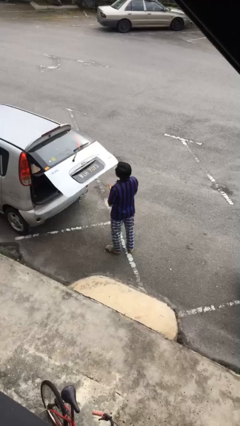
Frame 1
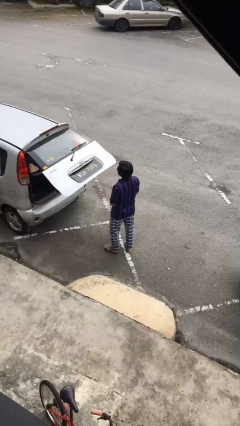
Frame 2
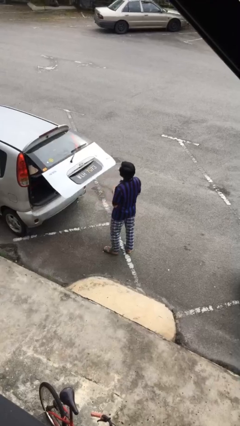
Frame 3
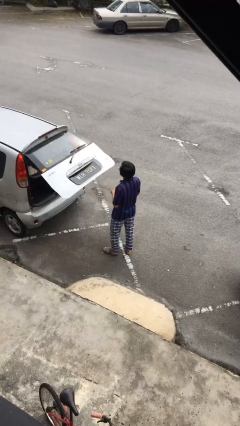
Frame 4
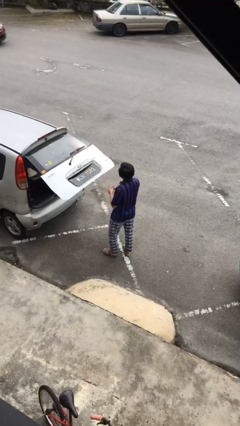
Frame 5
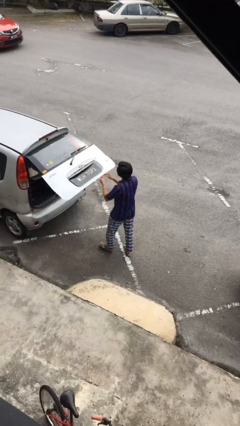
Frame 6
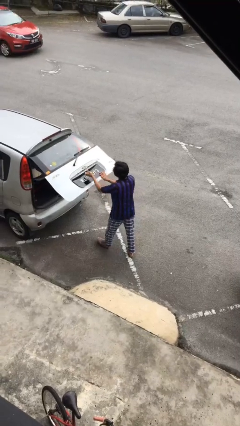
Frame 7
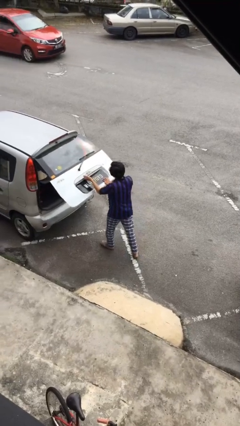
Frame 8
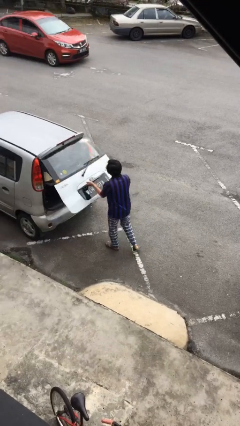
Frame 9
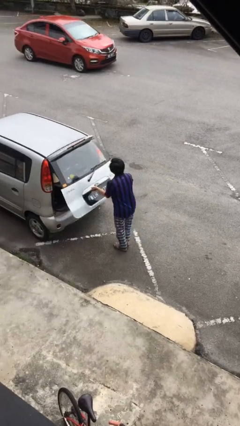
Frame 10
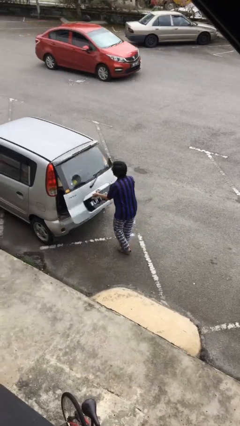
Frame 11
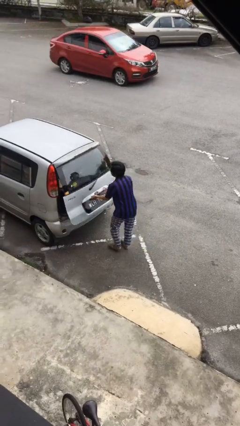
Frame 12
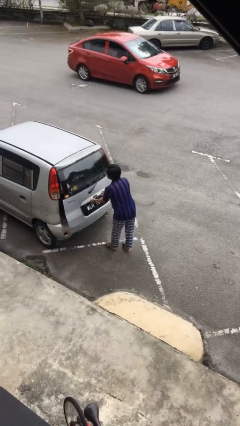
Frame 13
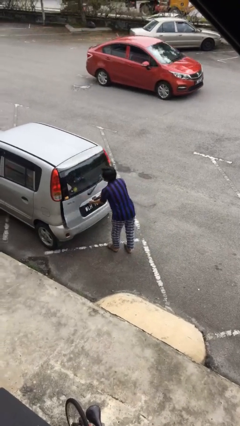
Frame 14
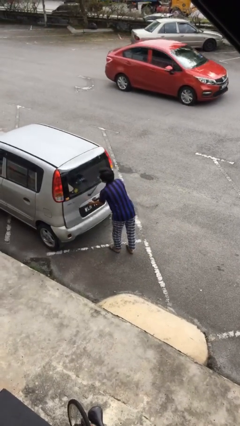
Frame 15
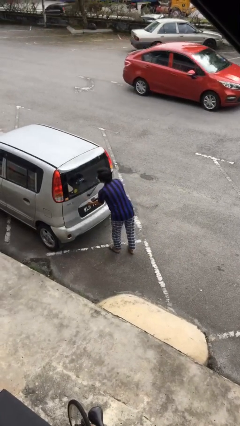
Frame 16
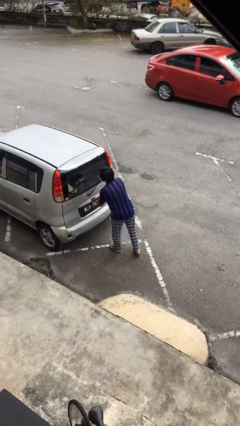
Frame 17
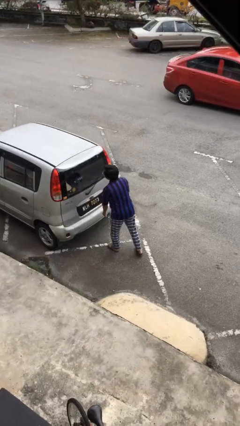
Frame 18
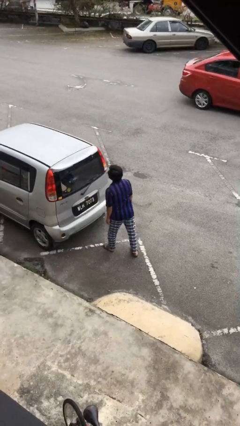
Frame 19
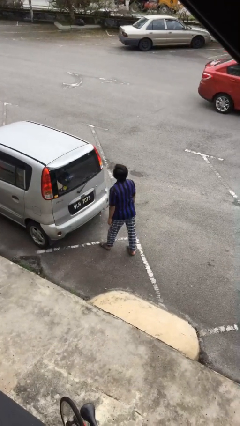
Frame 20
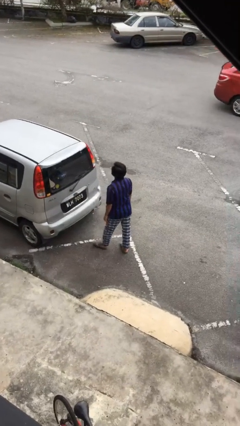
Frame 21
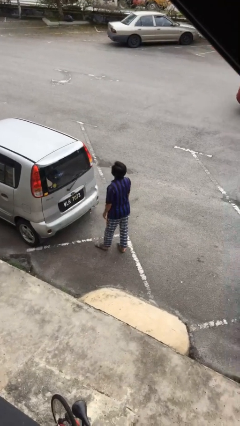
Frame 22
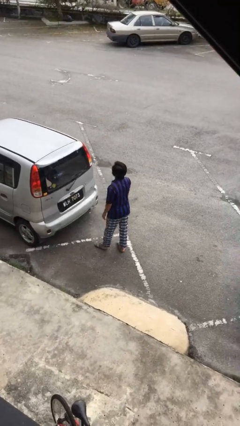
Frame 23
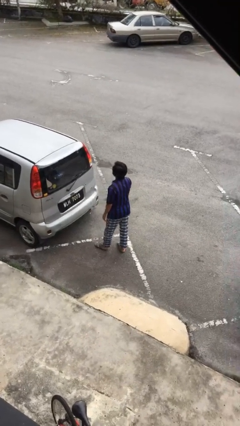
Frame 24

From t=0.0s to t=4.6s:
person closes car trunk

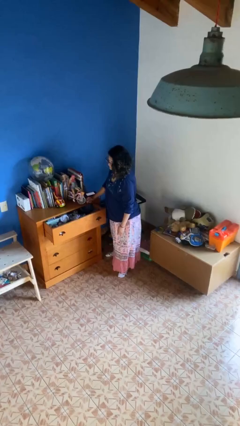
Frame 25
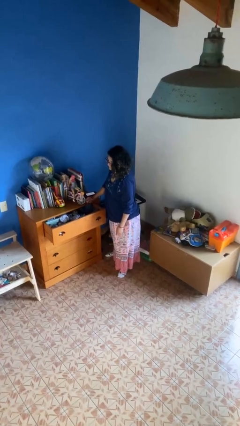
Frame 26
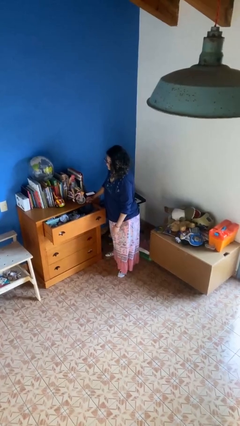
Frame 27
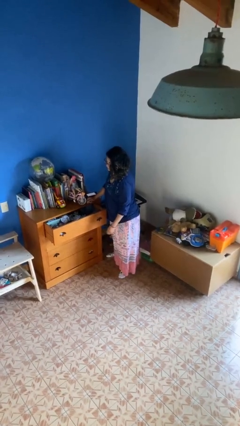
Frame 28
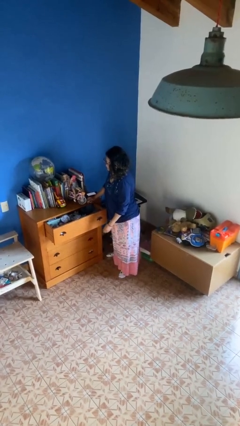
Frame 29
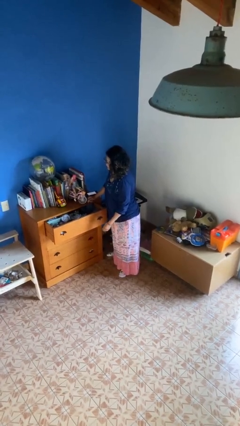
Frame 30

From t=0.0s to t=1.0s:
person opens dresser drawer

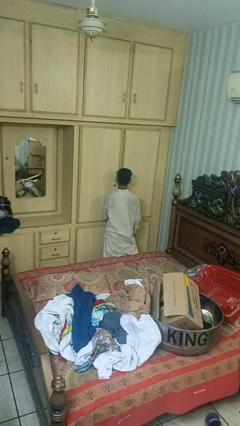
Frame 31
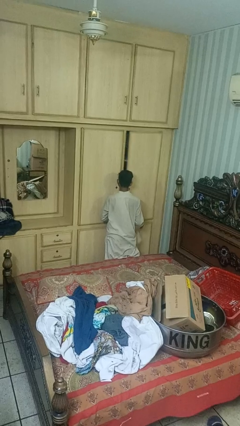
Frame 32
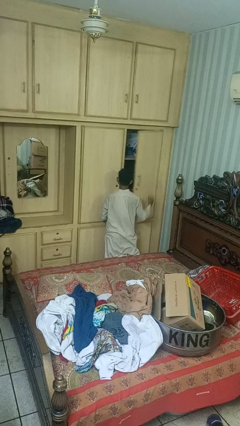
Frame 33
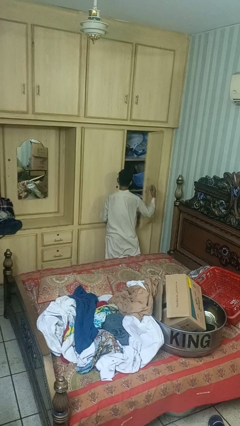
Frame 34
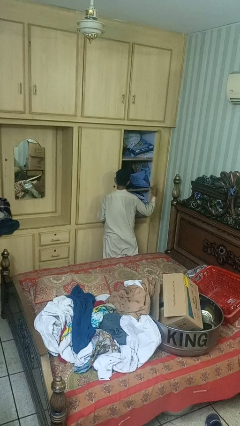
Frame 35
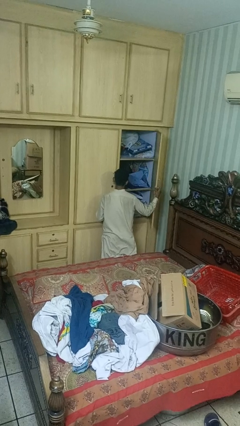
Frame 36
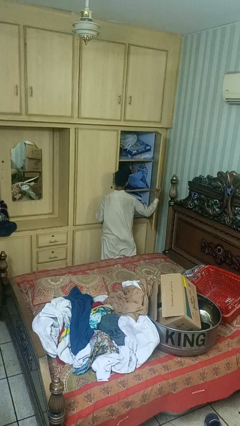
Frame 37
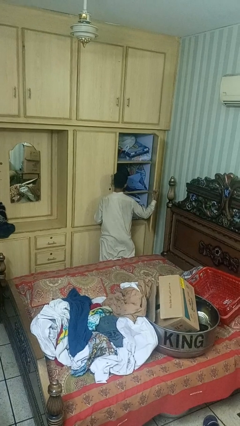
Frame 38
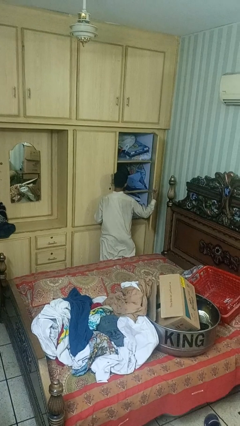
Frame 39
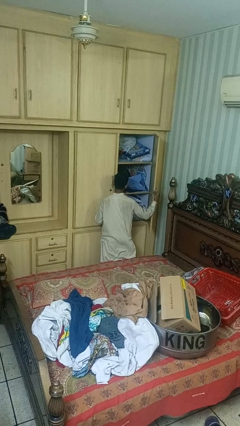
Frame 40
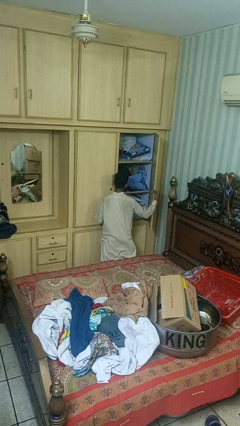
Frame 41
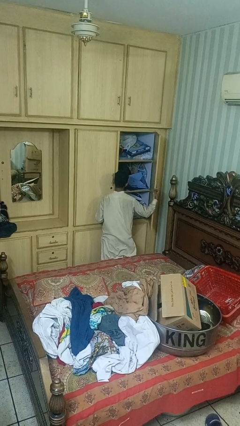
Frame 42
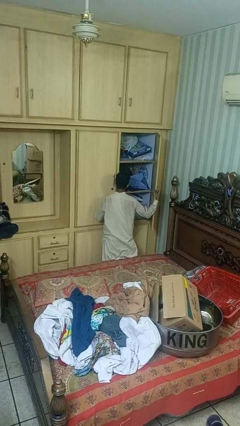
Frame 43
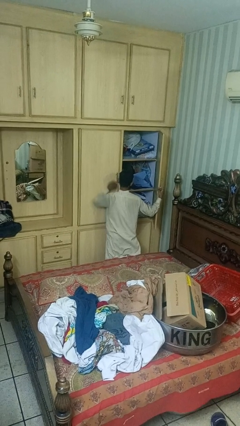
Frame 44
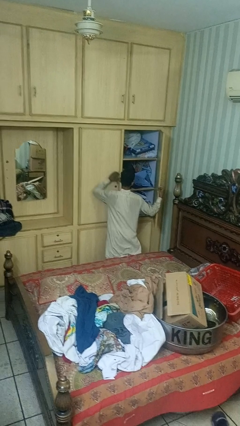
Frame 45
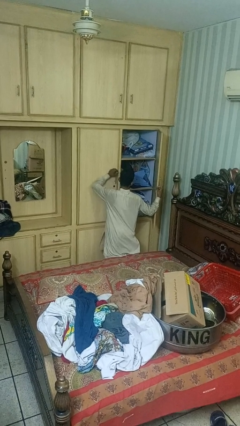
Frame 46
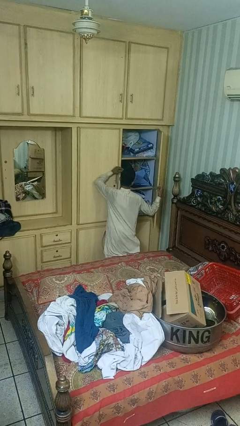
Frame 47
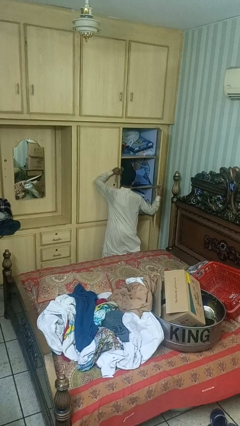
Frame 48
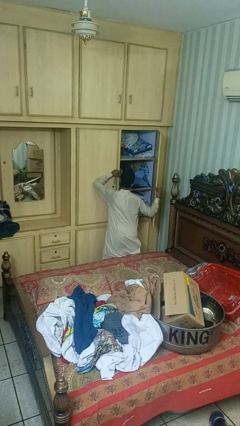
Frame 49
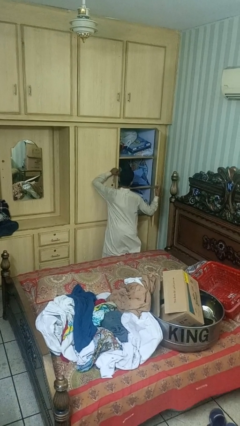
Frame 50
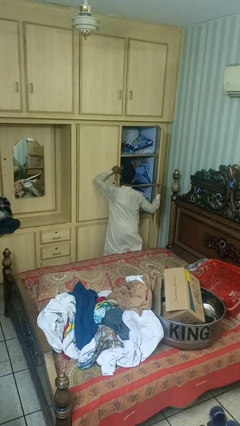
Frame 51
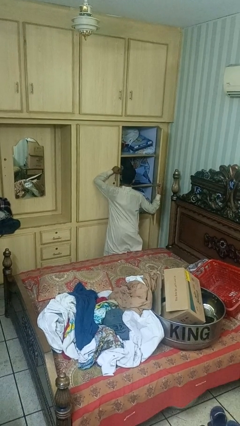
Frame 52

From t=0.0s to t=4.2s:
person opens closet door

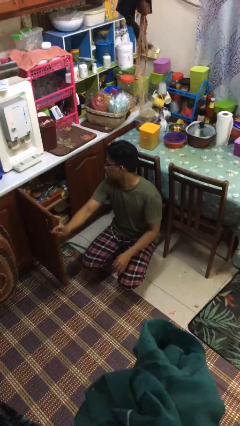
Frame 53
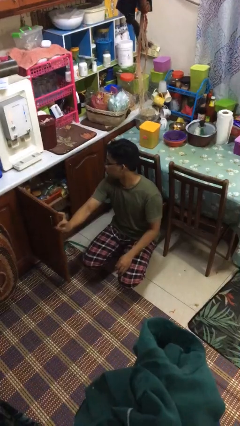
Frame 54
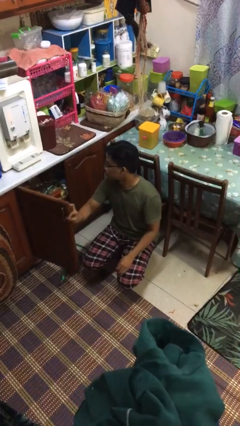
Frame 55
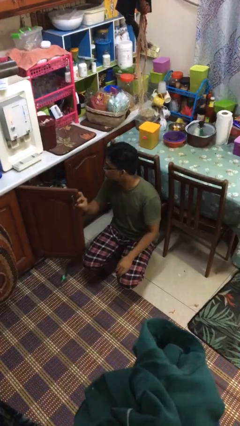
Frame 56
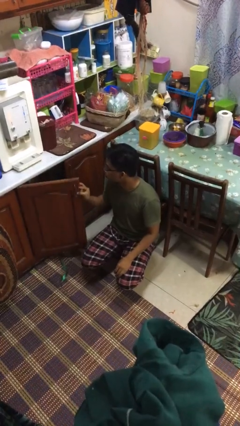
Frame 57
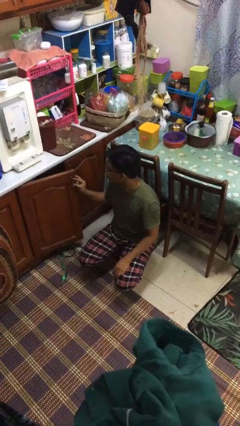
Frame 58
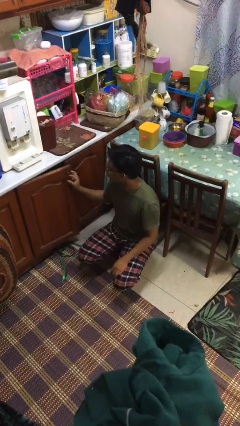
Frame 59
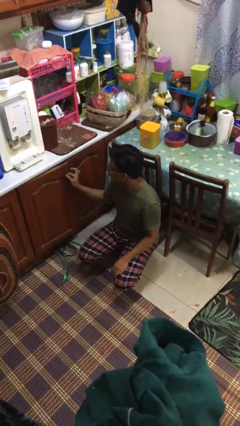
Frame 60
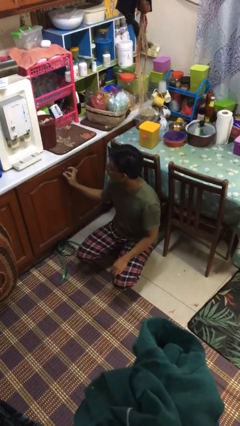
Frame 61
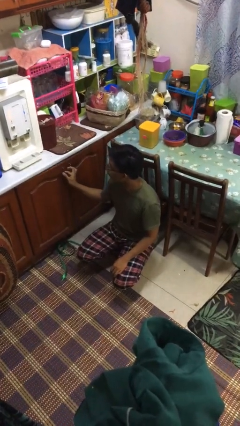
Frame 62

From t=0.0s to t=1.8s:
person closes kitchen drawer

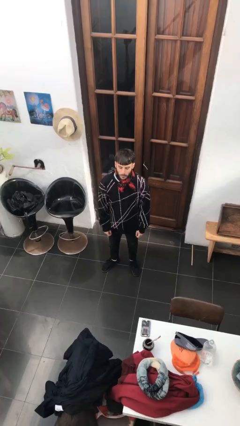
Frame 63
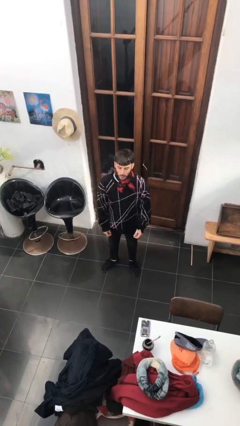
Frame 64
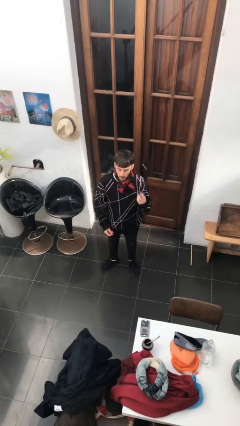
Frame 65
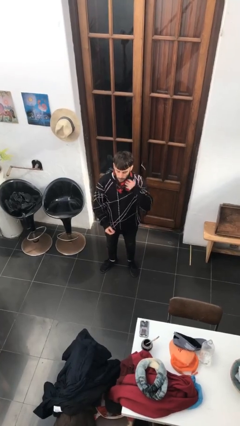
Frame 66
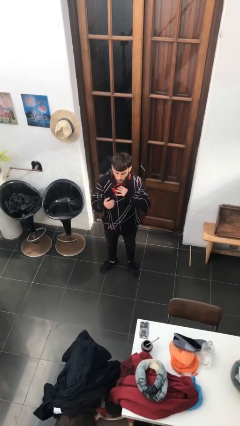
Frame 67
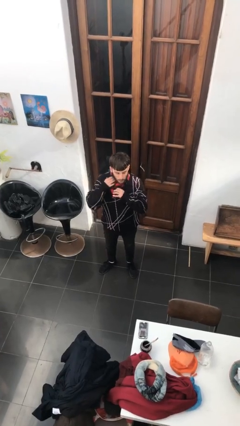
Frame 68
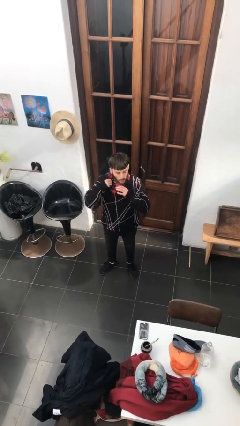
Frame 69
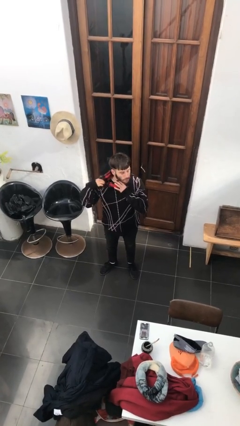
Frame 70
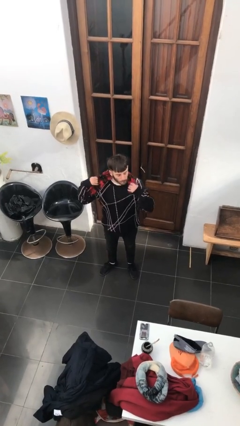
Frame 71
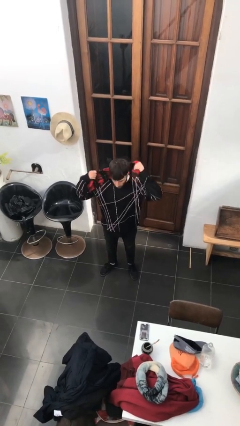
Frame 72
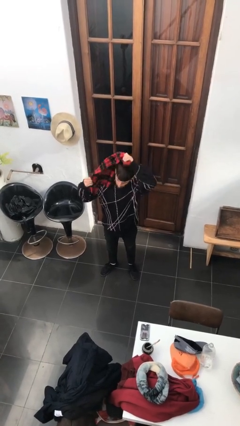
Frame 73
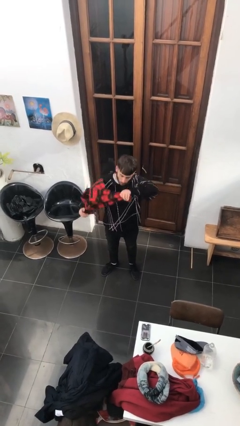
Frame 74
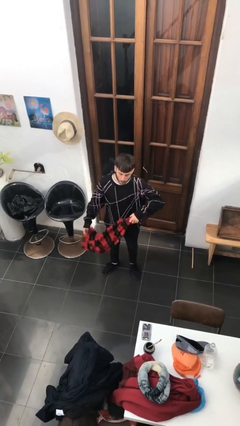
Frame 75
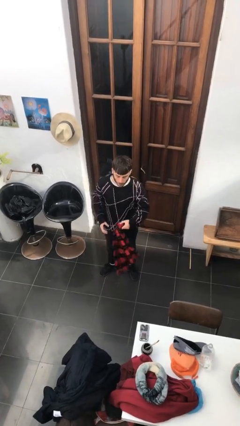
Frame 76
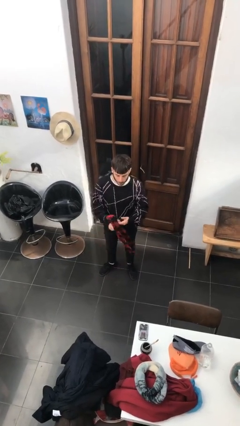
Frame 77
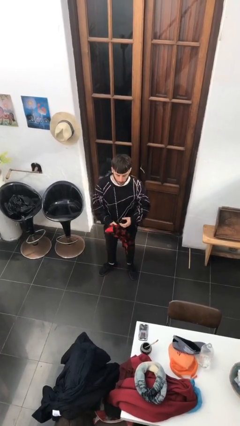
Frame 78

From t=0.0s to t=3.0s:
person takes off scarf

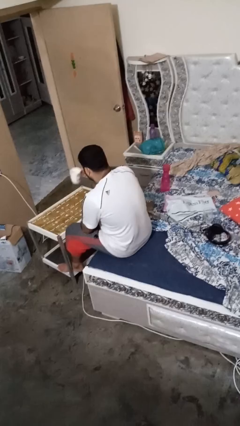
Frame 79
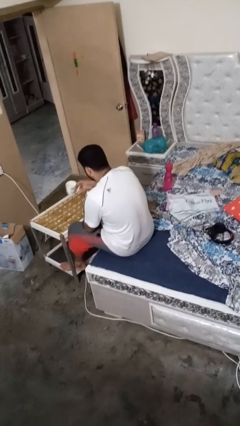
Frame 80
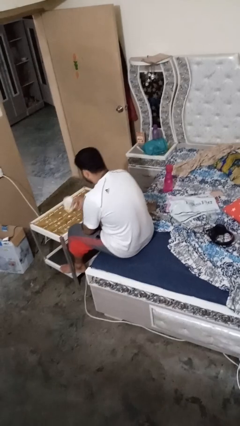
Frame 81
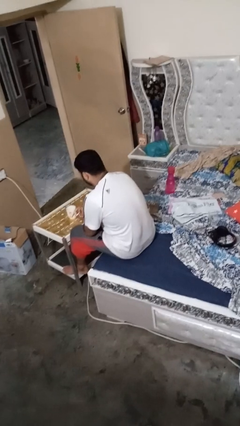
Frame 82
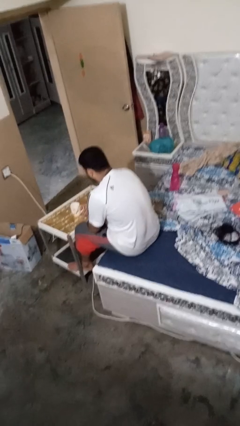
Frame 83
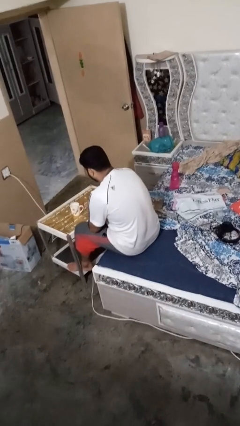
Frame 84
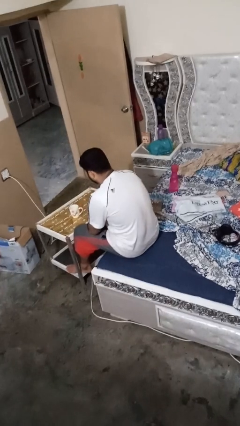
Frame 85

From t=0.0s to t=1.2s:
person puts down object on table

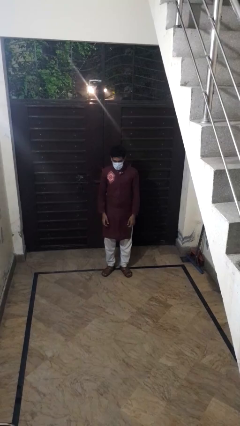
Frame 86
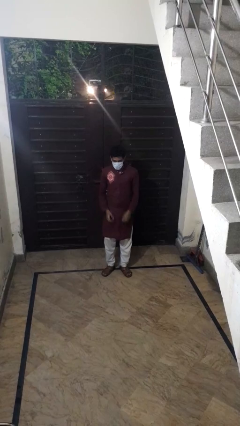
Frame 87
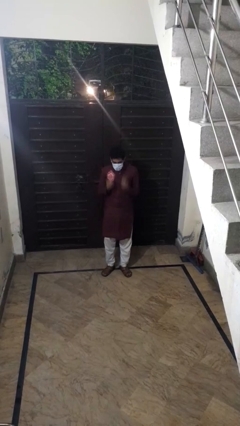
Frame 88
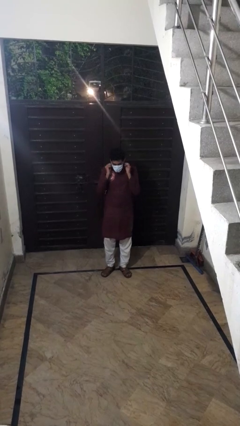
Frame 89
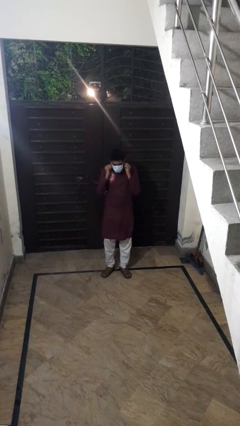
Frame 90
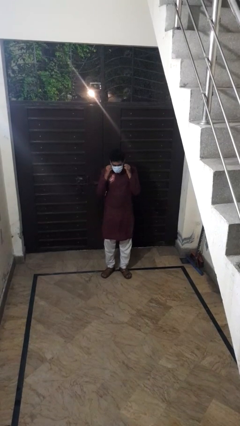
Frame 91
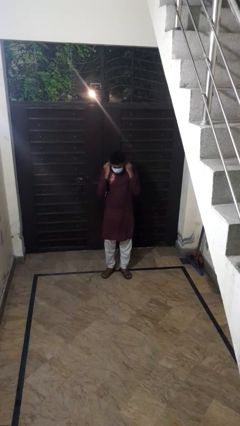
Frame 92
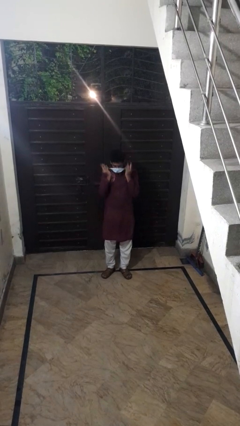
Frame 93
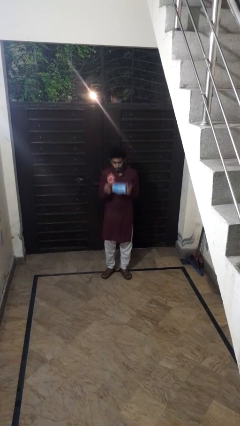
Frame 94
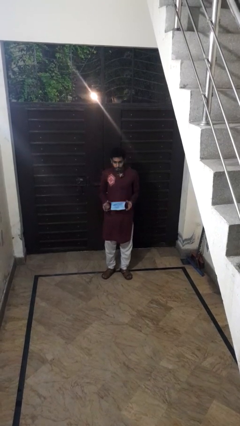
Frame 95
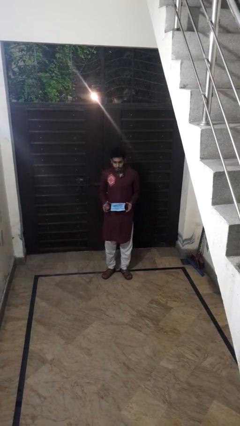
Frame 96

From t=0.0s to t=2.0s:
person takes off facemask
